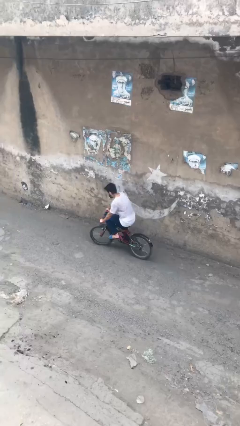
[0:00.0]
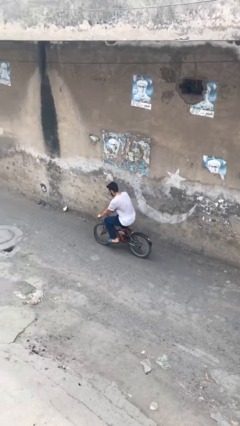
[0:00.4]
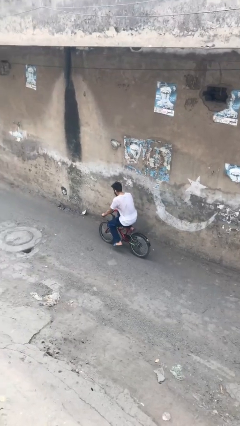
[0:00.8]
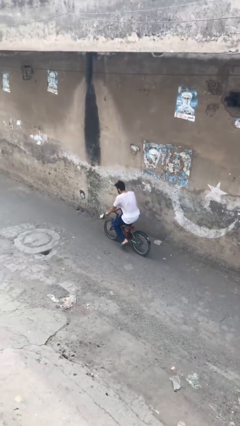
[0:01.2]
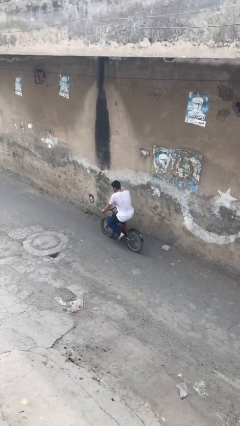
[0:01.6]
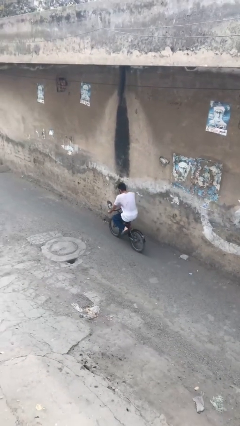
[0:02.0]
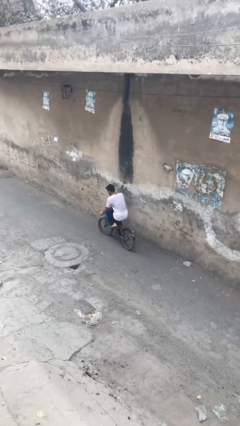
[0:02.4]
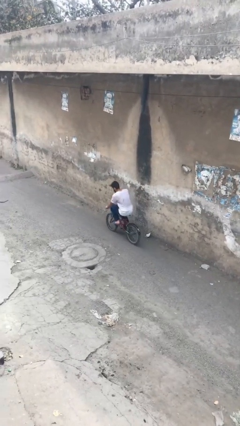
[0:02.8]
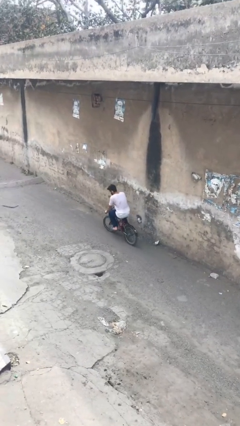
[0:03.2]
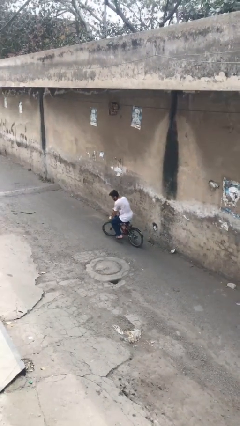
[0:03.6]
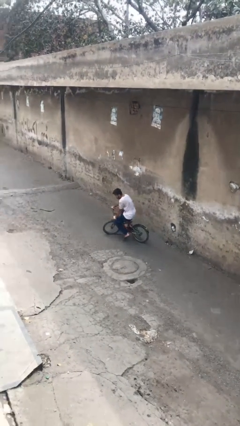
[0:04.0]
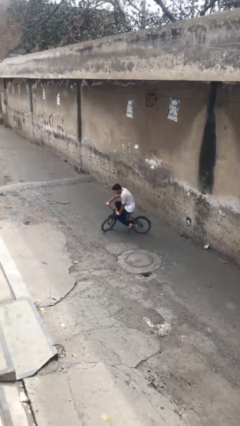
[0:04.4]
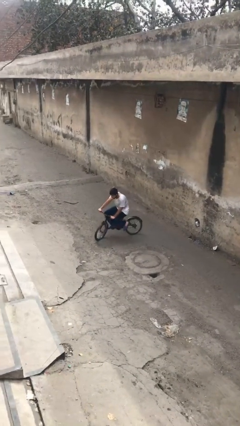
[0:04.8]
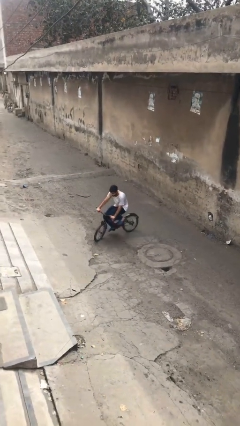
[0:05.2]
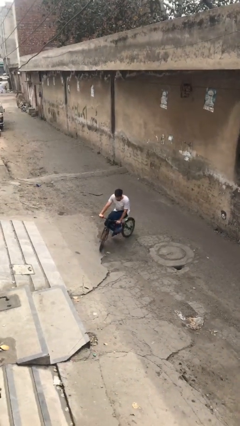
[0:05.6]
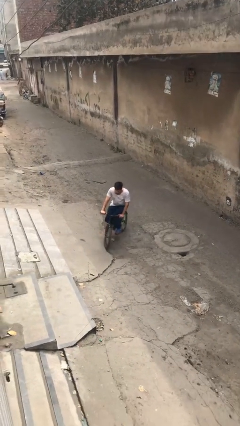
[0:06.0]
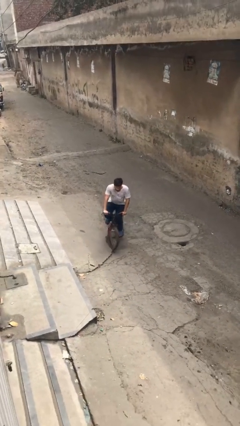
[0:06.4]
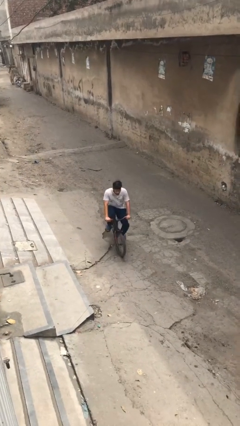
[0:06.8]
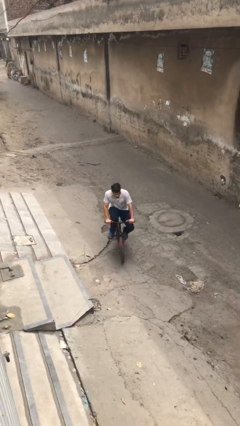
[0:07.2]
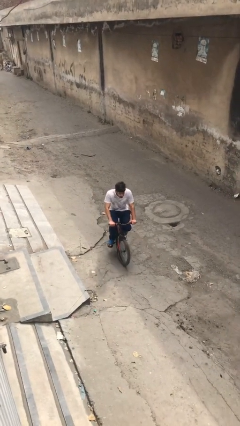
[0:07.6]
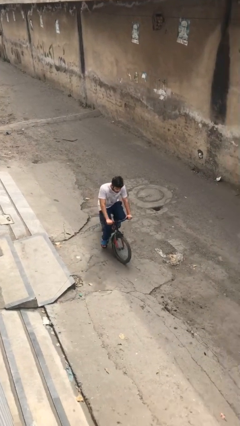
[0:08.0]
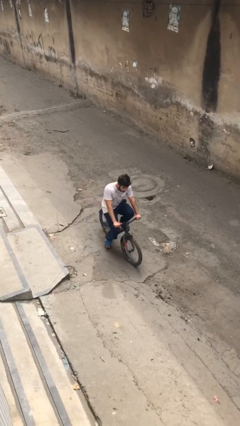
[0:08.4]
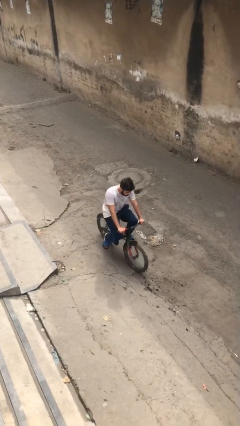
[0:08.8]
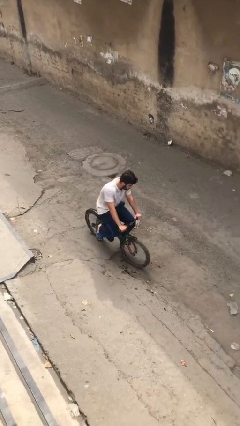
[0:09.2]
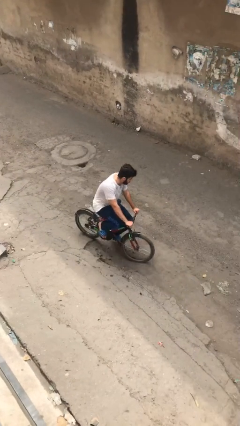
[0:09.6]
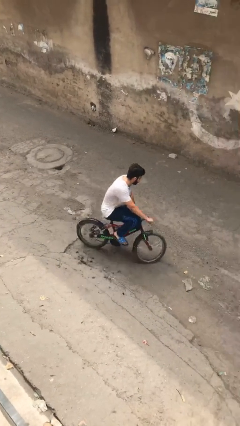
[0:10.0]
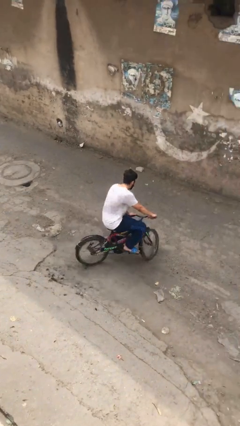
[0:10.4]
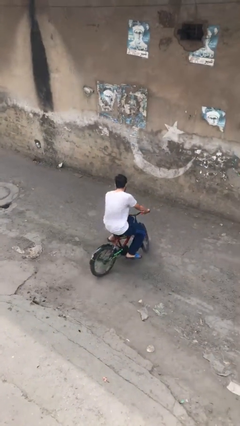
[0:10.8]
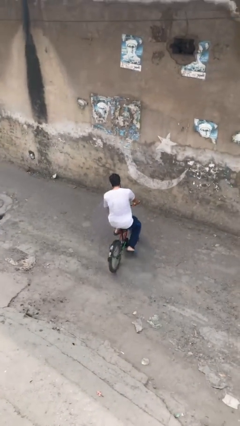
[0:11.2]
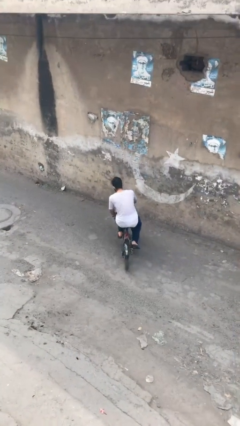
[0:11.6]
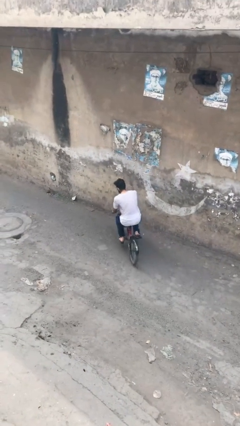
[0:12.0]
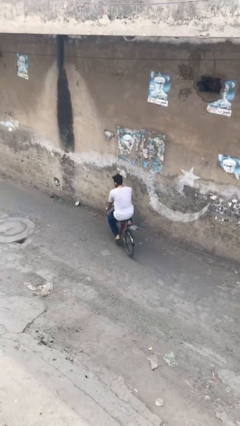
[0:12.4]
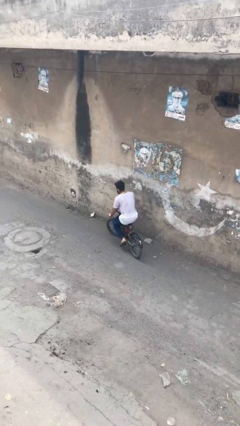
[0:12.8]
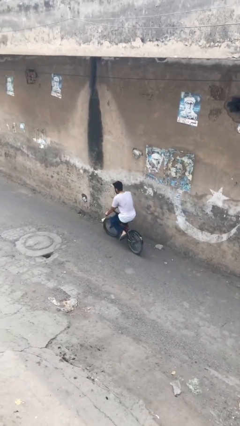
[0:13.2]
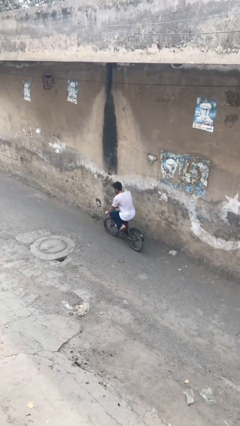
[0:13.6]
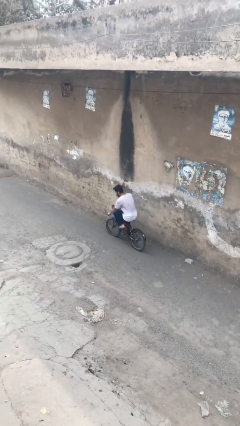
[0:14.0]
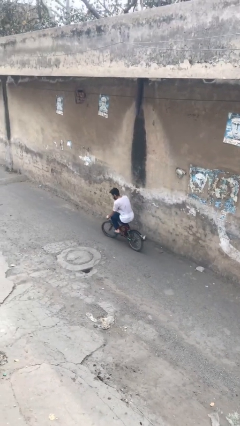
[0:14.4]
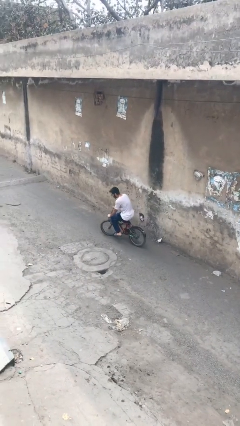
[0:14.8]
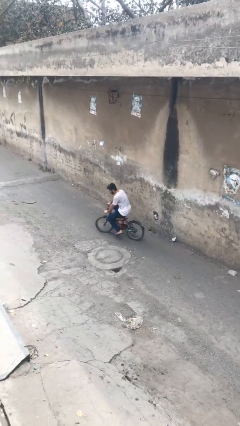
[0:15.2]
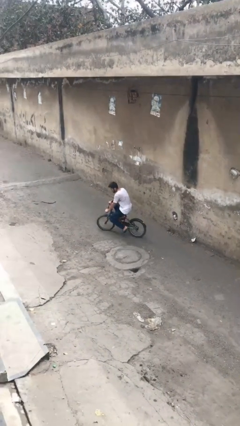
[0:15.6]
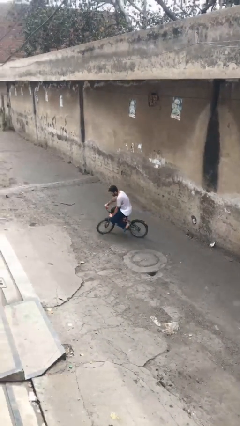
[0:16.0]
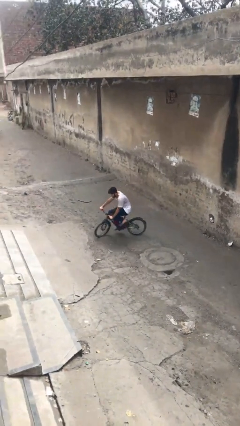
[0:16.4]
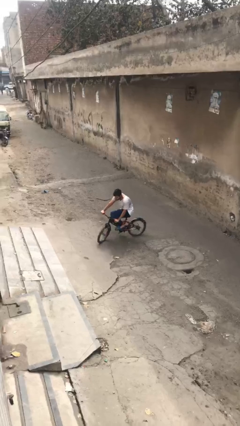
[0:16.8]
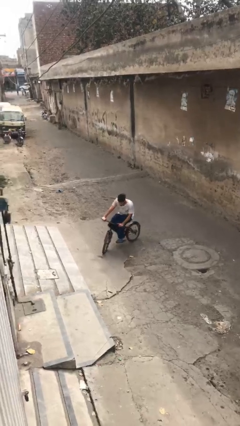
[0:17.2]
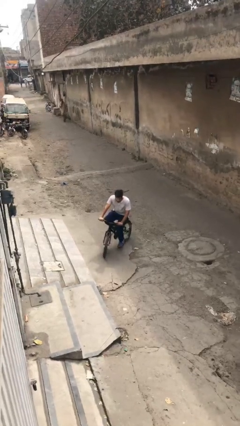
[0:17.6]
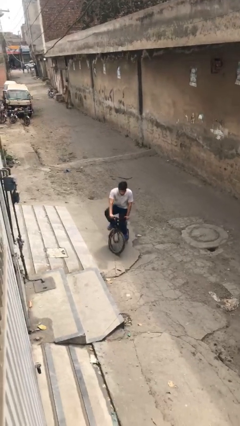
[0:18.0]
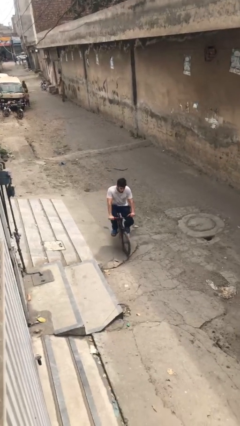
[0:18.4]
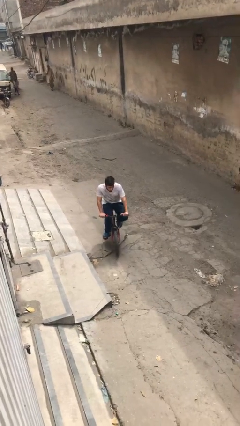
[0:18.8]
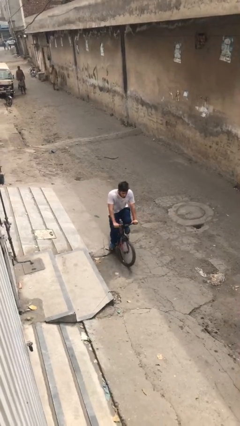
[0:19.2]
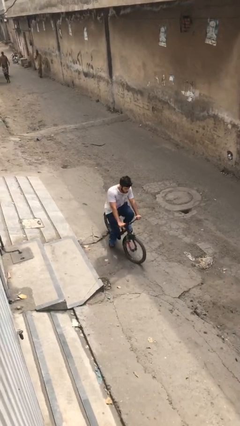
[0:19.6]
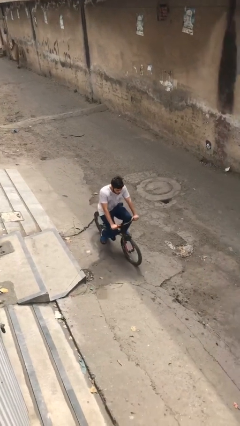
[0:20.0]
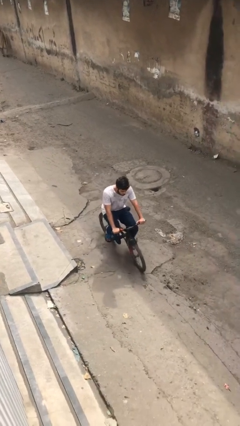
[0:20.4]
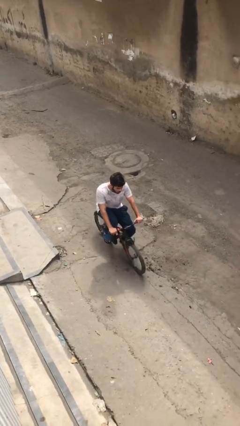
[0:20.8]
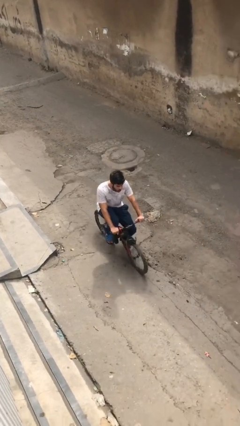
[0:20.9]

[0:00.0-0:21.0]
person rides bicycle

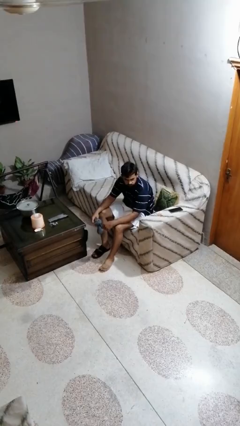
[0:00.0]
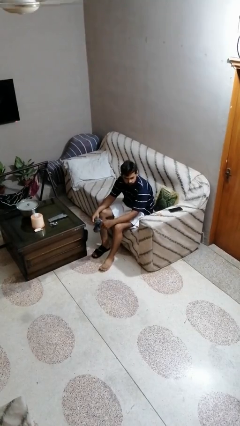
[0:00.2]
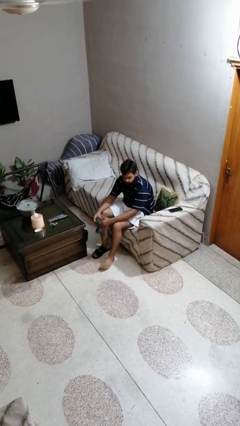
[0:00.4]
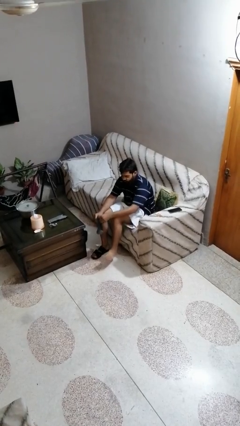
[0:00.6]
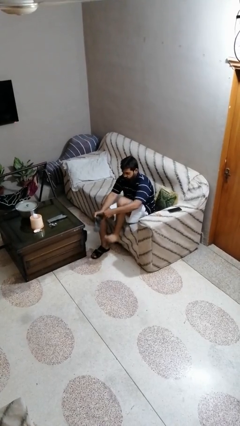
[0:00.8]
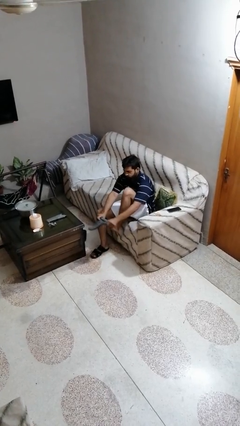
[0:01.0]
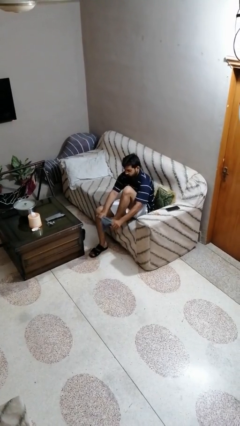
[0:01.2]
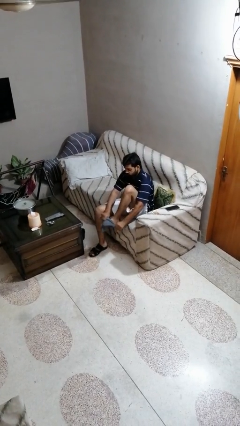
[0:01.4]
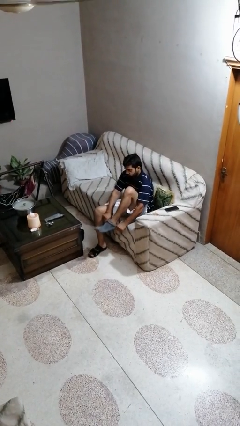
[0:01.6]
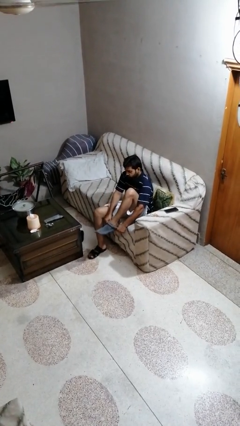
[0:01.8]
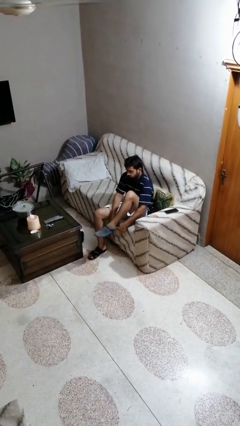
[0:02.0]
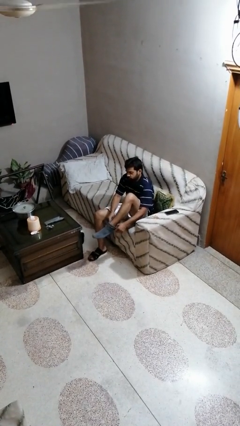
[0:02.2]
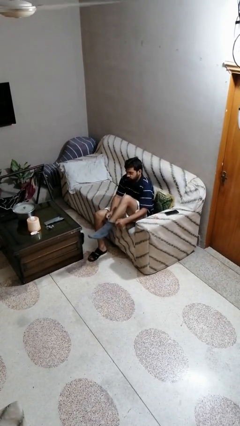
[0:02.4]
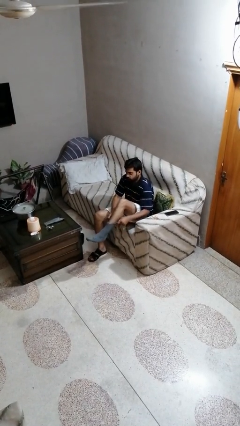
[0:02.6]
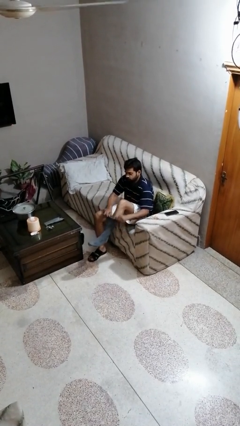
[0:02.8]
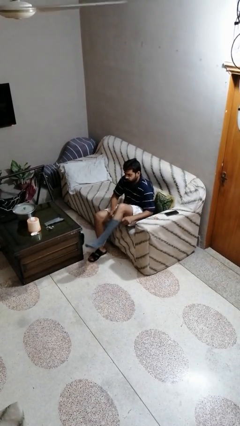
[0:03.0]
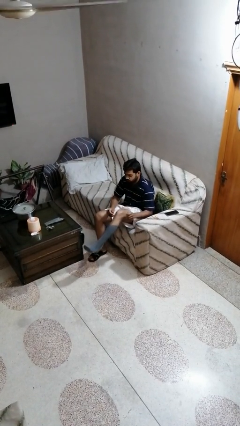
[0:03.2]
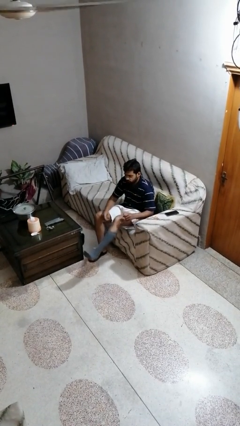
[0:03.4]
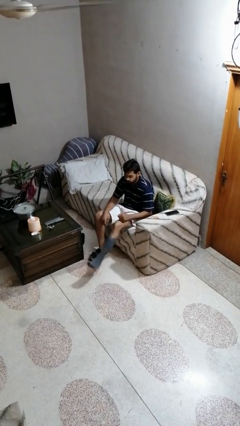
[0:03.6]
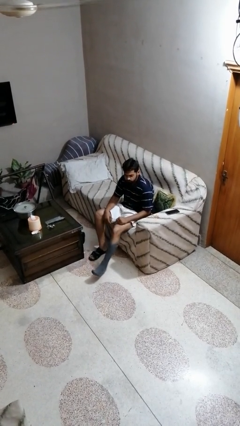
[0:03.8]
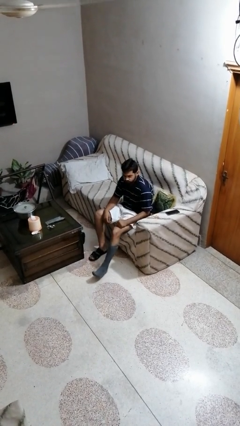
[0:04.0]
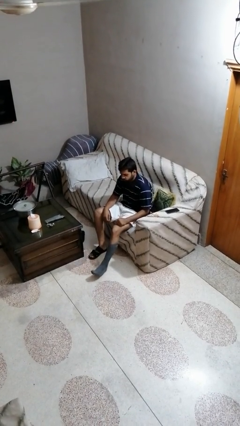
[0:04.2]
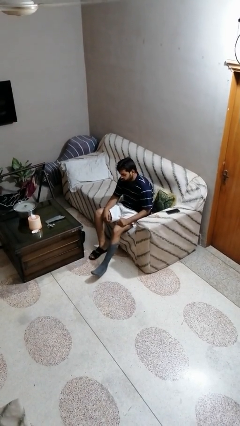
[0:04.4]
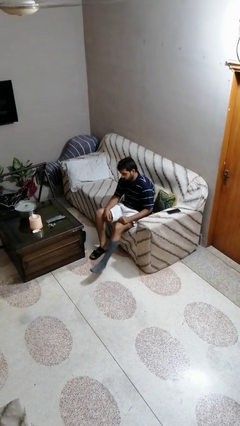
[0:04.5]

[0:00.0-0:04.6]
person puts on socks

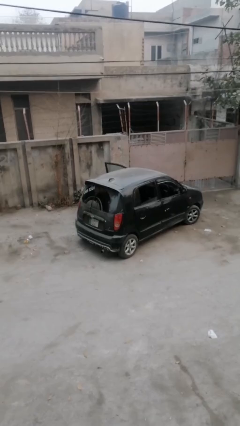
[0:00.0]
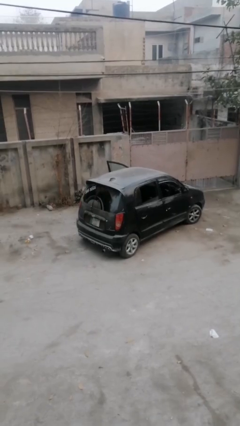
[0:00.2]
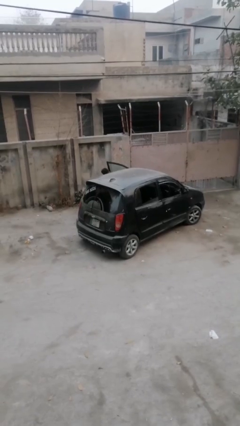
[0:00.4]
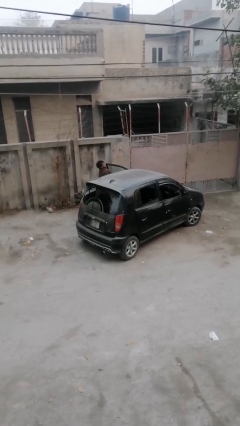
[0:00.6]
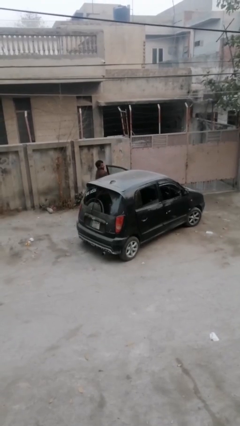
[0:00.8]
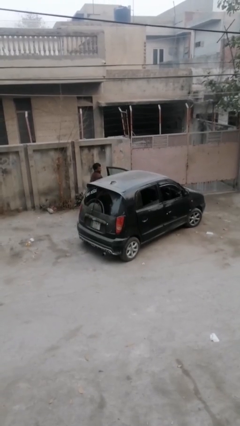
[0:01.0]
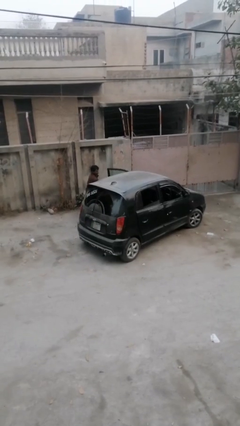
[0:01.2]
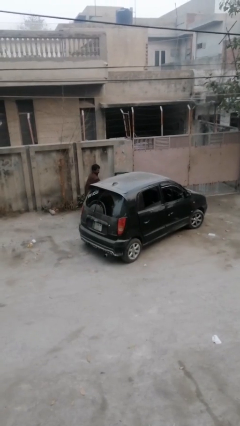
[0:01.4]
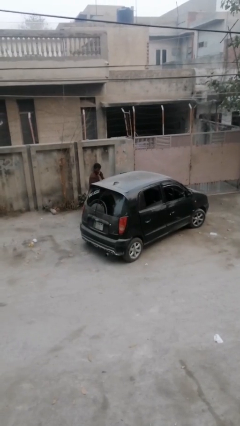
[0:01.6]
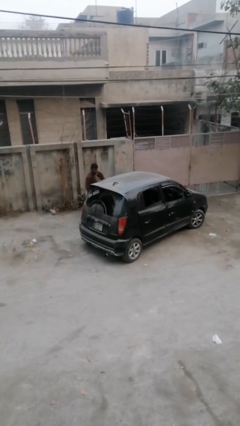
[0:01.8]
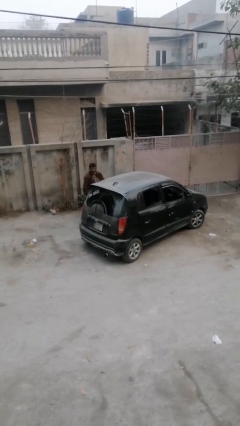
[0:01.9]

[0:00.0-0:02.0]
car drops off person

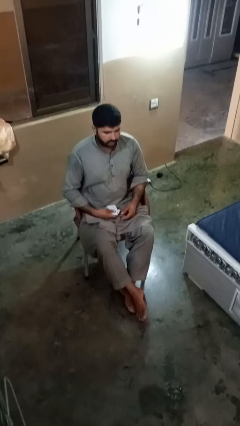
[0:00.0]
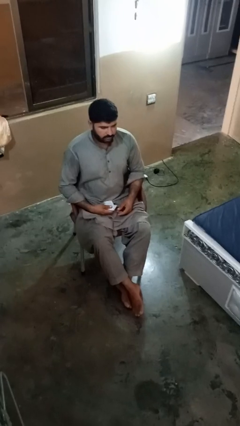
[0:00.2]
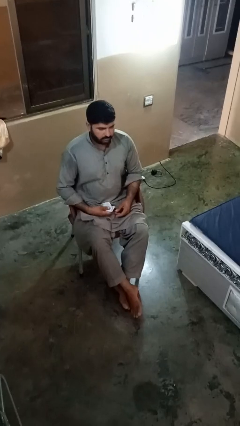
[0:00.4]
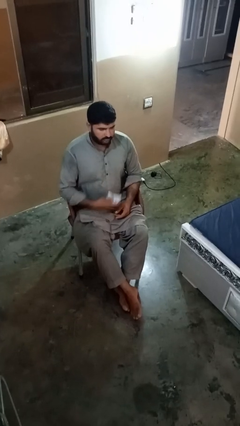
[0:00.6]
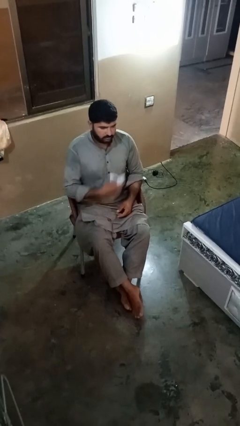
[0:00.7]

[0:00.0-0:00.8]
person blows nose
